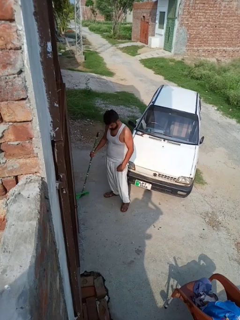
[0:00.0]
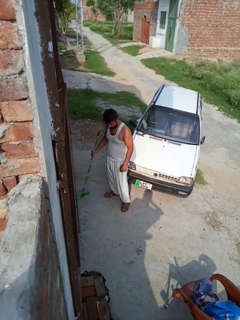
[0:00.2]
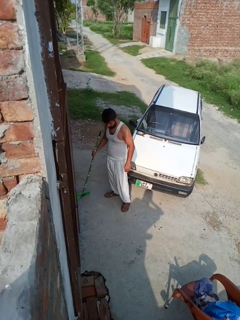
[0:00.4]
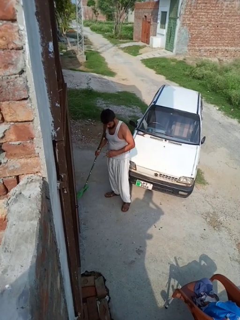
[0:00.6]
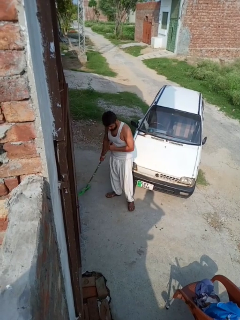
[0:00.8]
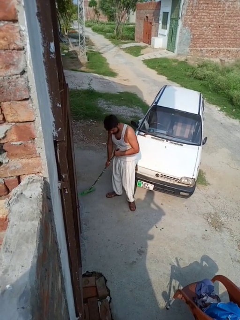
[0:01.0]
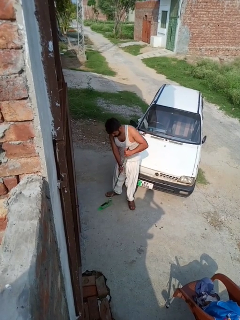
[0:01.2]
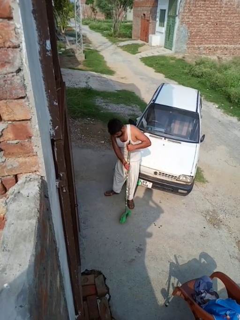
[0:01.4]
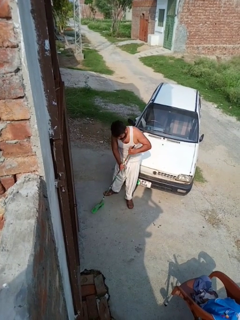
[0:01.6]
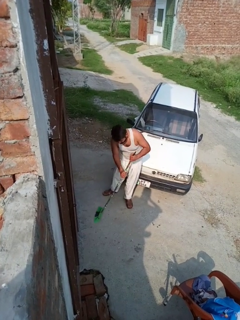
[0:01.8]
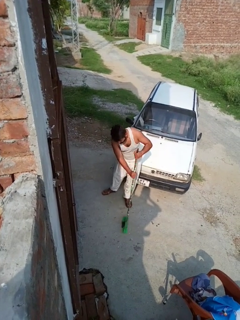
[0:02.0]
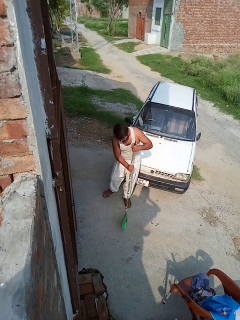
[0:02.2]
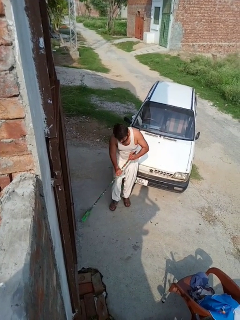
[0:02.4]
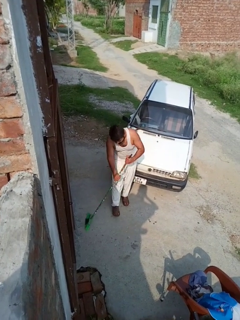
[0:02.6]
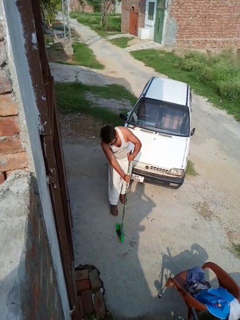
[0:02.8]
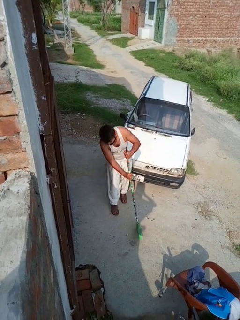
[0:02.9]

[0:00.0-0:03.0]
person sweeps floor

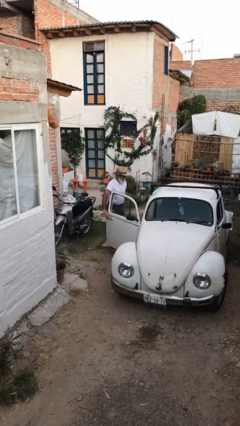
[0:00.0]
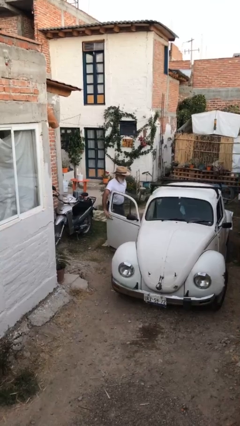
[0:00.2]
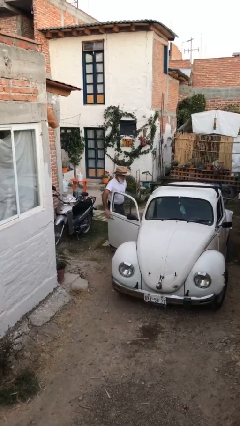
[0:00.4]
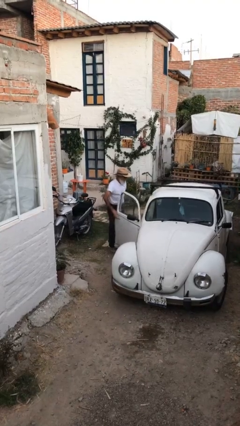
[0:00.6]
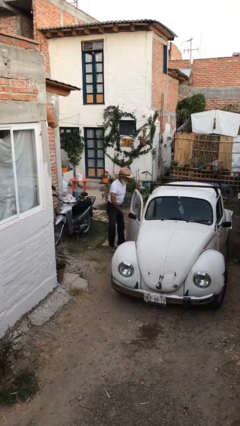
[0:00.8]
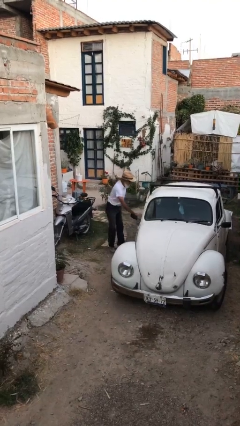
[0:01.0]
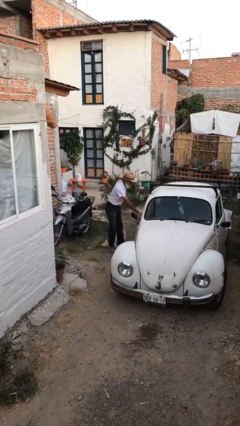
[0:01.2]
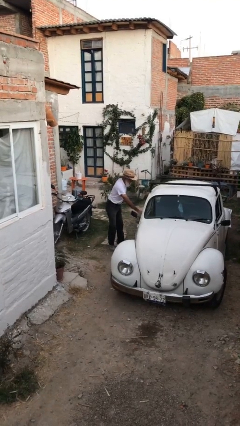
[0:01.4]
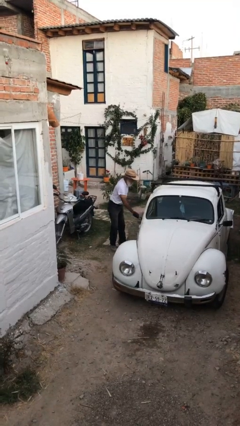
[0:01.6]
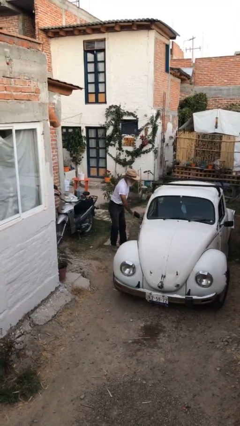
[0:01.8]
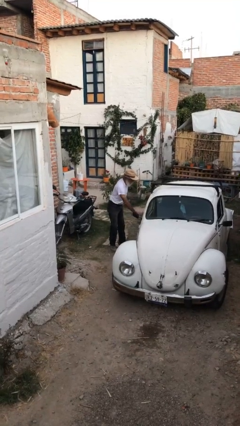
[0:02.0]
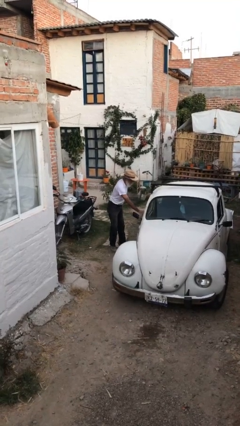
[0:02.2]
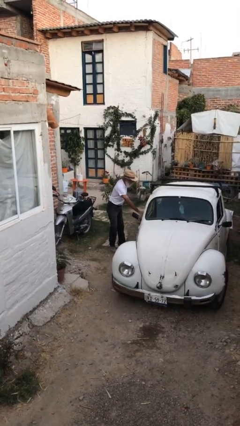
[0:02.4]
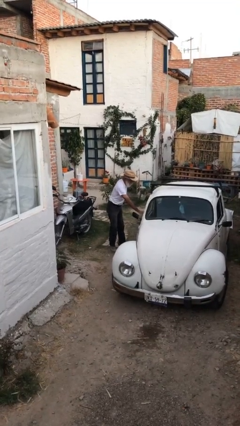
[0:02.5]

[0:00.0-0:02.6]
person closes car door

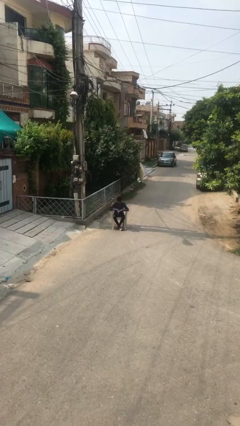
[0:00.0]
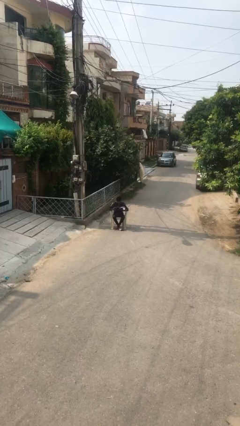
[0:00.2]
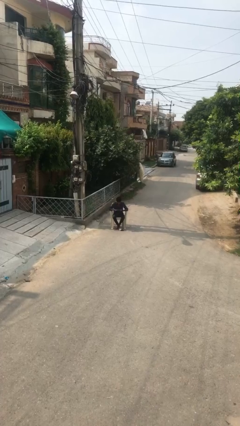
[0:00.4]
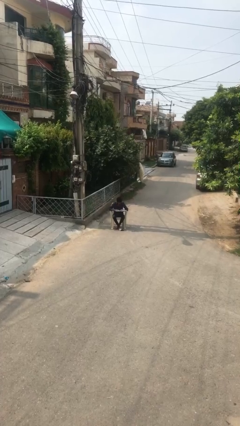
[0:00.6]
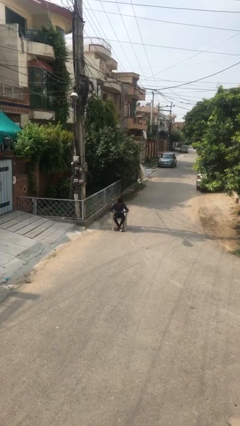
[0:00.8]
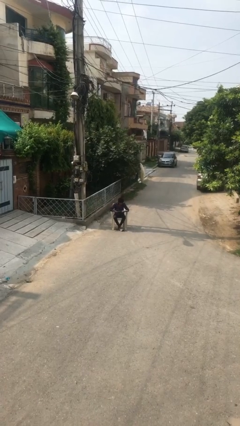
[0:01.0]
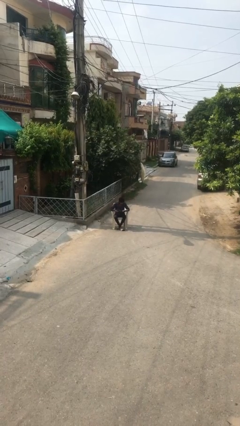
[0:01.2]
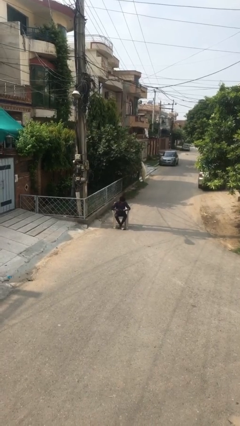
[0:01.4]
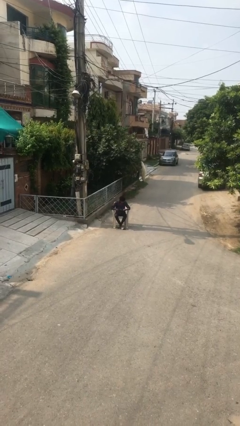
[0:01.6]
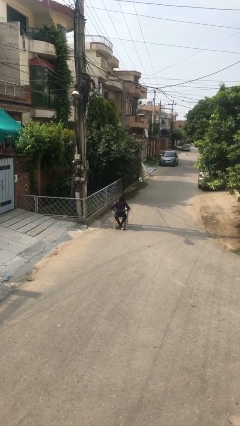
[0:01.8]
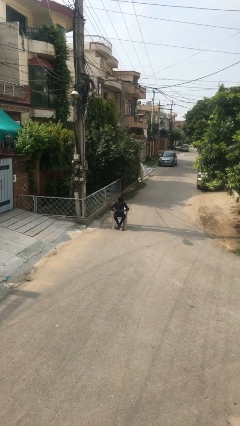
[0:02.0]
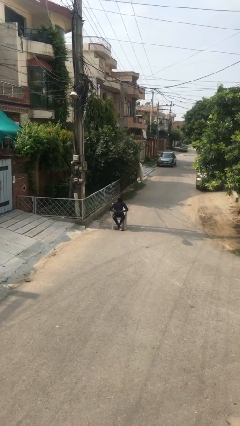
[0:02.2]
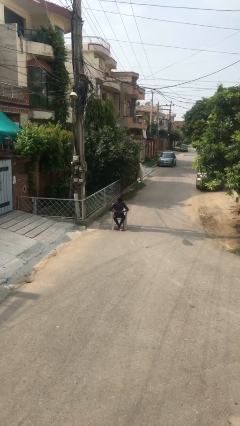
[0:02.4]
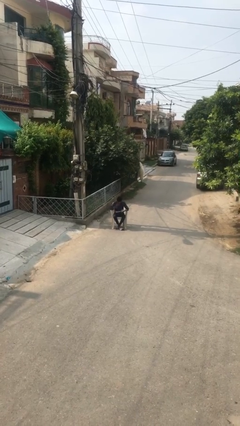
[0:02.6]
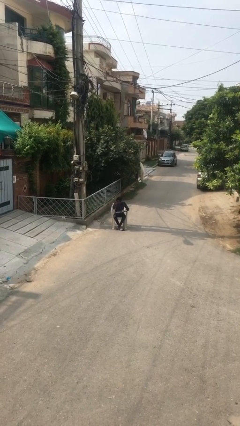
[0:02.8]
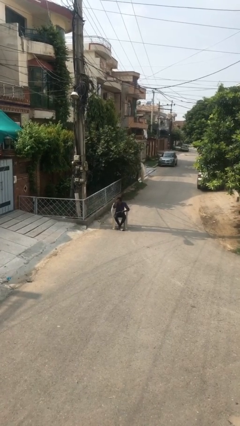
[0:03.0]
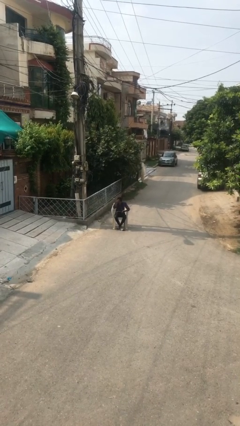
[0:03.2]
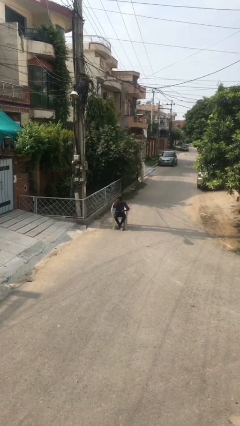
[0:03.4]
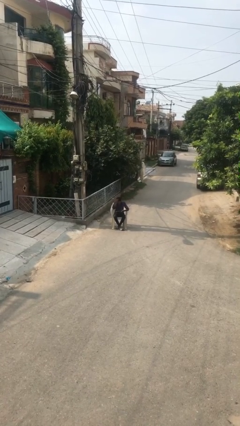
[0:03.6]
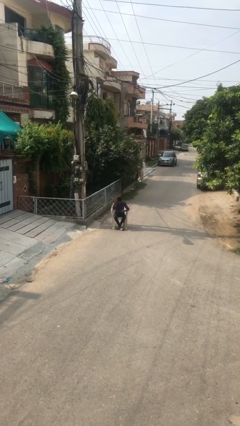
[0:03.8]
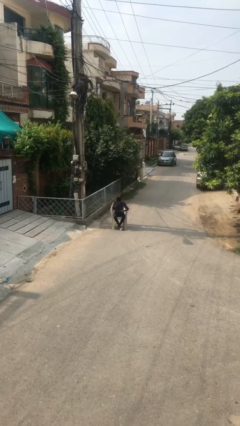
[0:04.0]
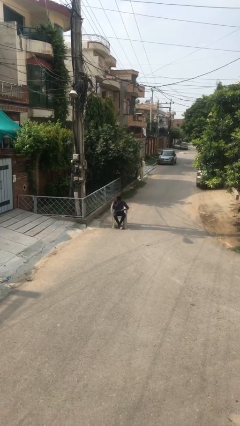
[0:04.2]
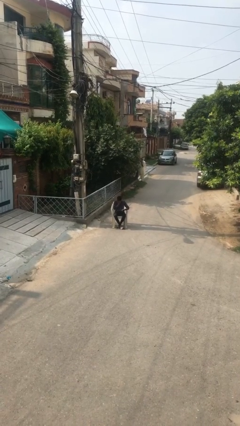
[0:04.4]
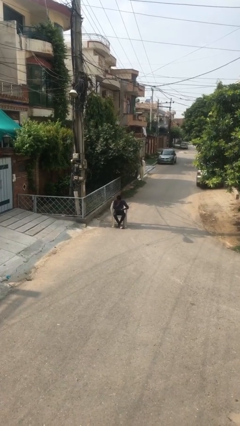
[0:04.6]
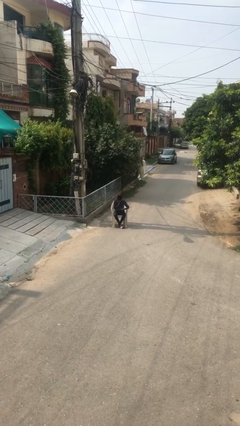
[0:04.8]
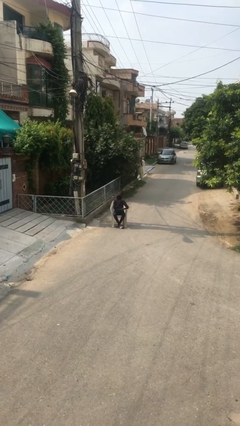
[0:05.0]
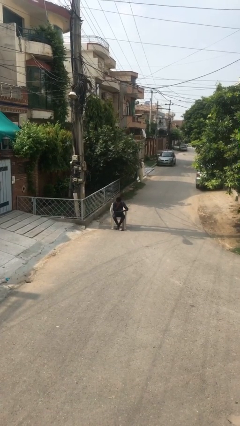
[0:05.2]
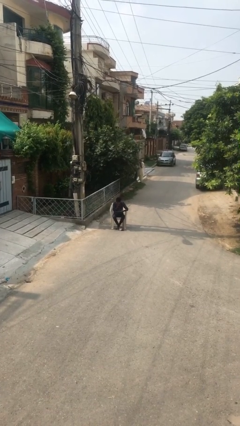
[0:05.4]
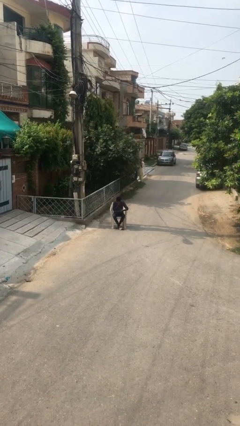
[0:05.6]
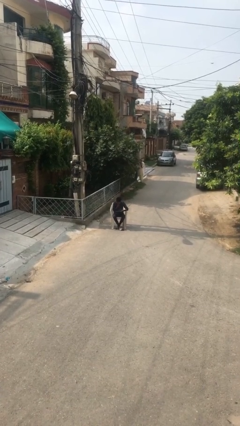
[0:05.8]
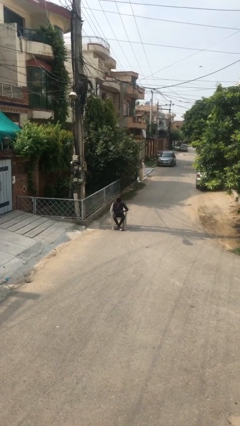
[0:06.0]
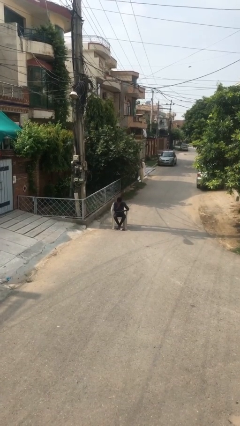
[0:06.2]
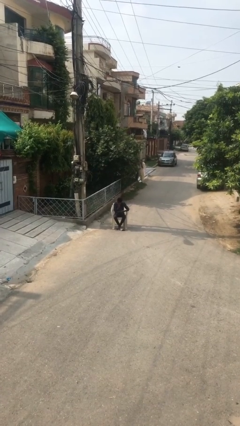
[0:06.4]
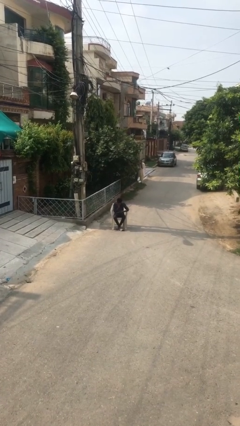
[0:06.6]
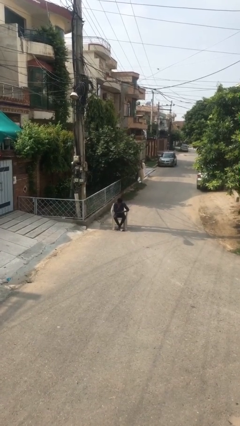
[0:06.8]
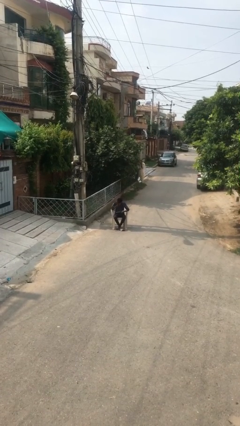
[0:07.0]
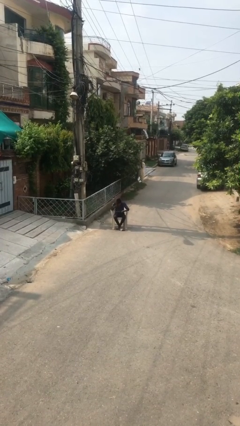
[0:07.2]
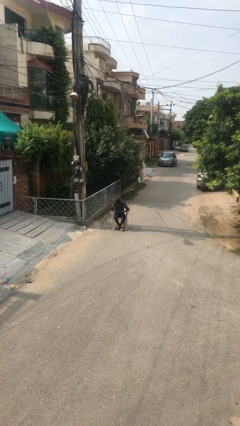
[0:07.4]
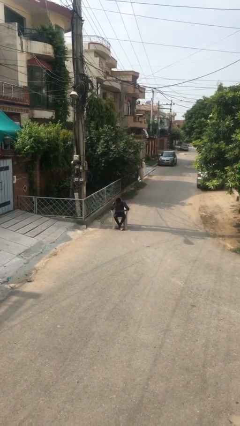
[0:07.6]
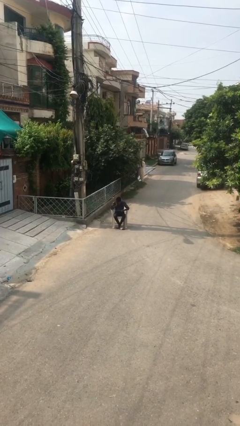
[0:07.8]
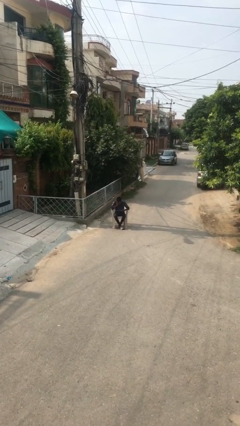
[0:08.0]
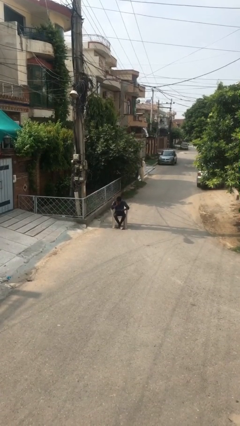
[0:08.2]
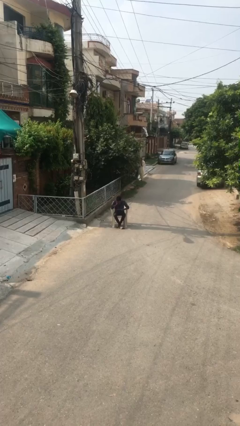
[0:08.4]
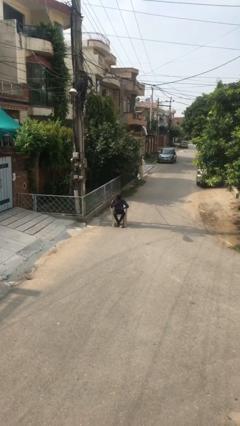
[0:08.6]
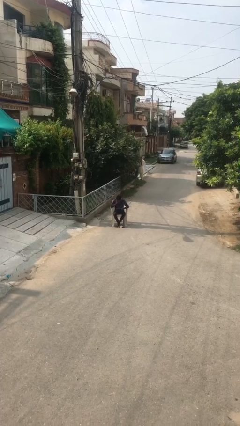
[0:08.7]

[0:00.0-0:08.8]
person reads document

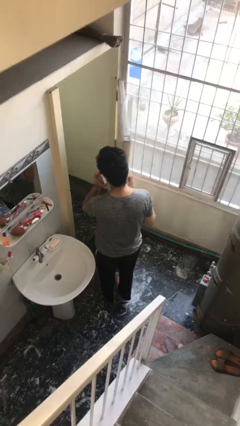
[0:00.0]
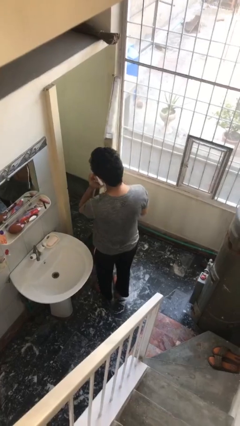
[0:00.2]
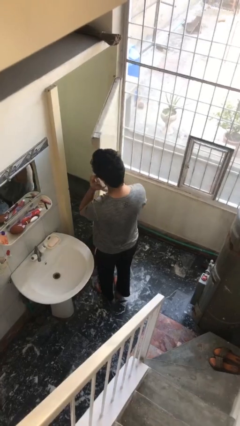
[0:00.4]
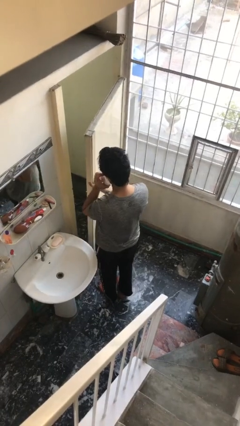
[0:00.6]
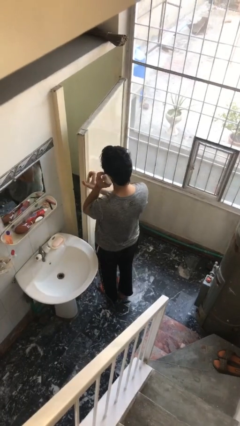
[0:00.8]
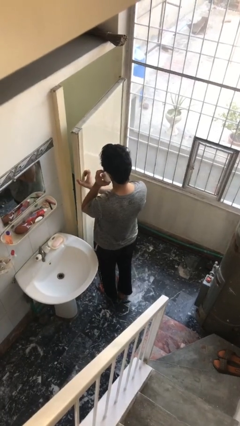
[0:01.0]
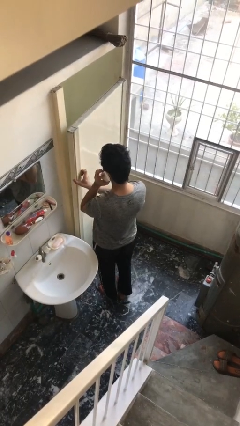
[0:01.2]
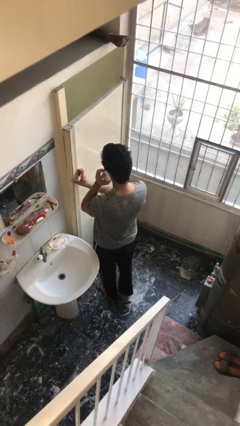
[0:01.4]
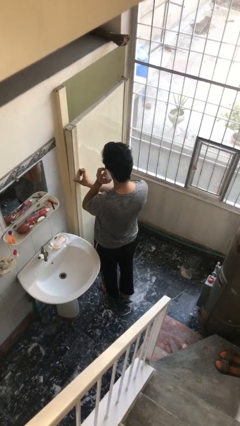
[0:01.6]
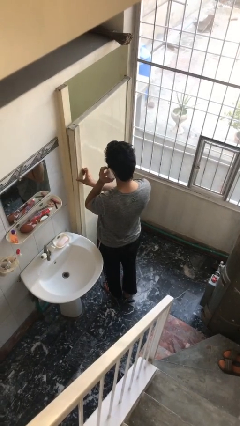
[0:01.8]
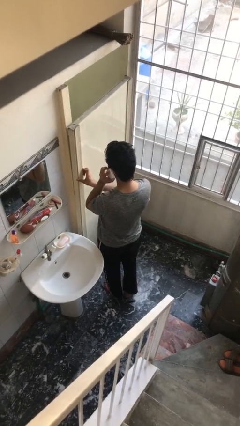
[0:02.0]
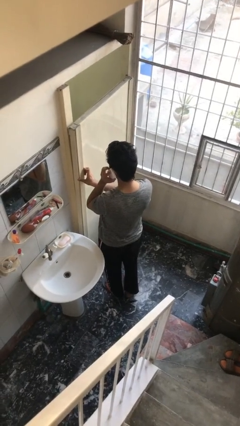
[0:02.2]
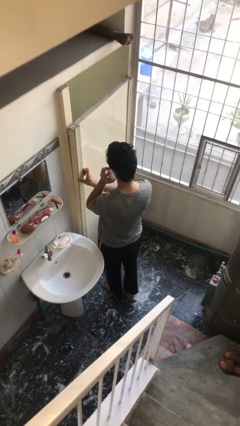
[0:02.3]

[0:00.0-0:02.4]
person closes facility door

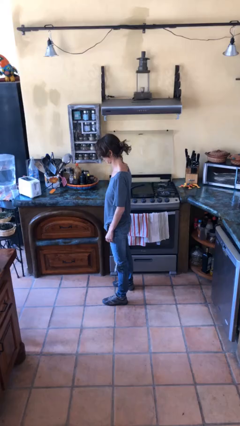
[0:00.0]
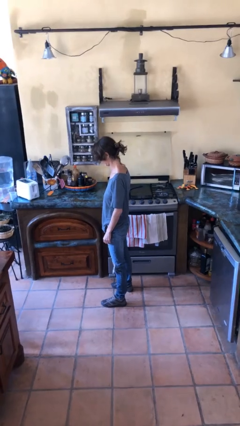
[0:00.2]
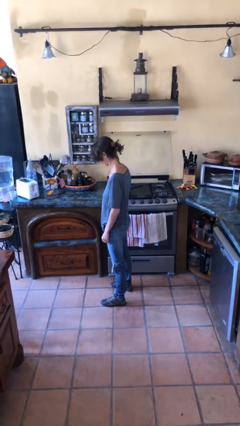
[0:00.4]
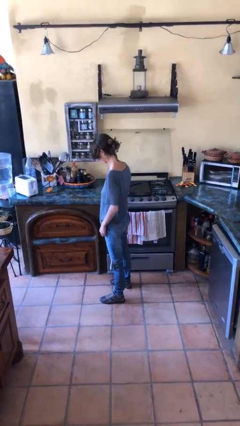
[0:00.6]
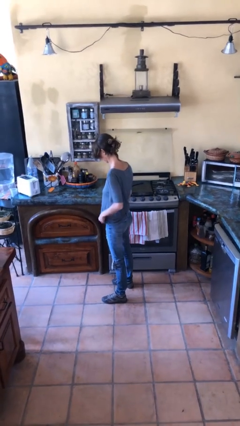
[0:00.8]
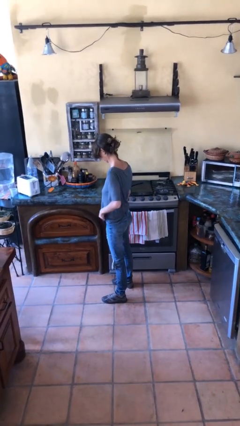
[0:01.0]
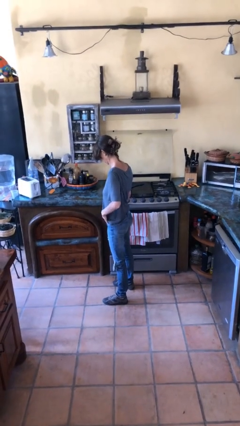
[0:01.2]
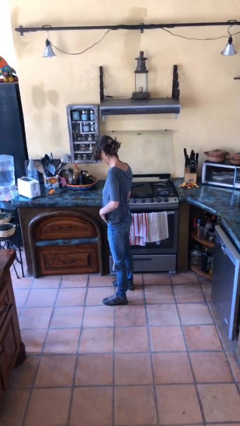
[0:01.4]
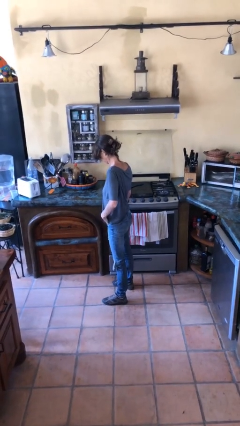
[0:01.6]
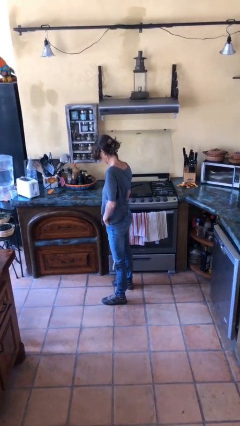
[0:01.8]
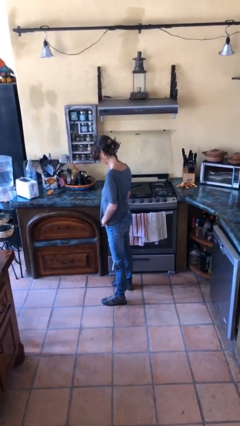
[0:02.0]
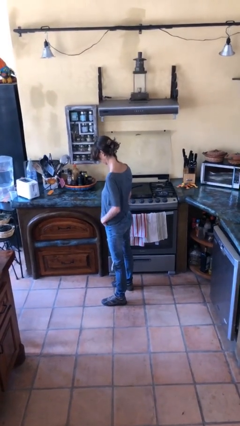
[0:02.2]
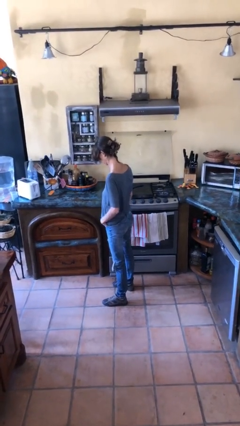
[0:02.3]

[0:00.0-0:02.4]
person puts hands in back pockets
